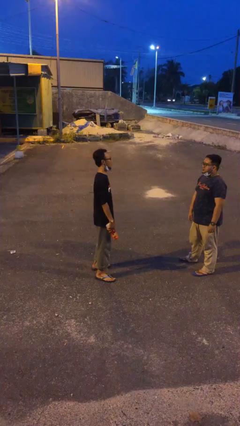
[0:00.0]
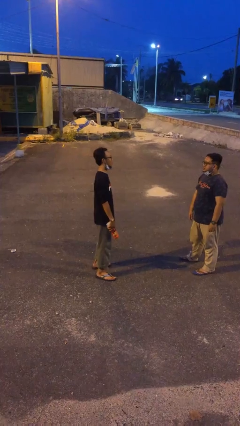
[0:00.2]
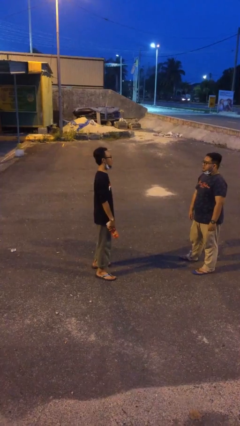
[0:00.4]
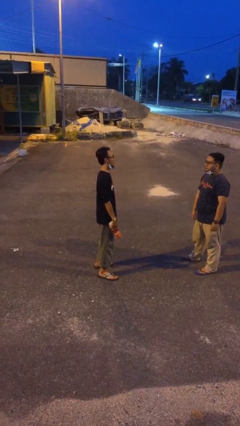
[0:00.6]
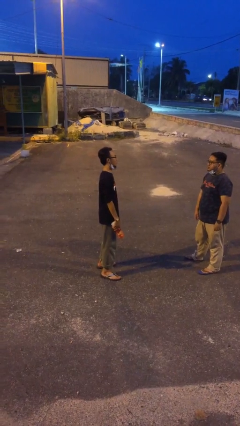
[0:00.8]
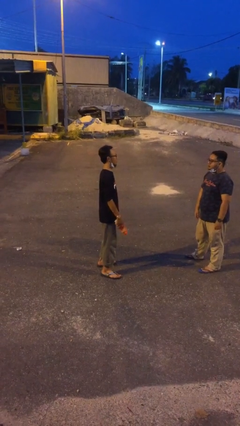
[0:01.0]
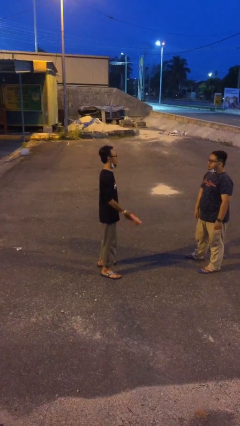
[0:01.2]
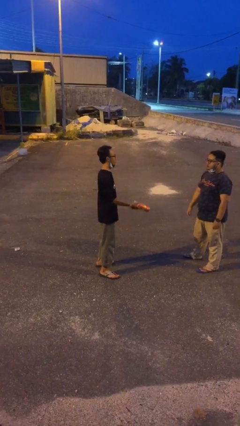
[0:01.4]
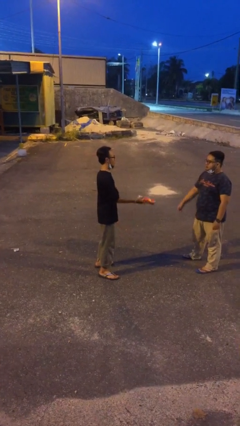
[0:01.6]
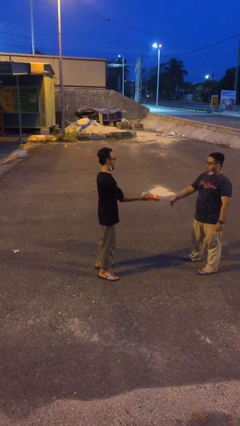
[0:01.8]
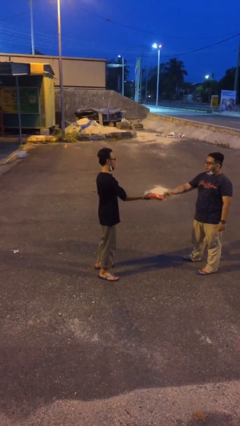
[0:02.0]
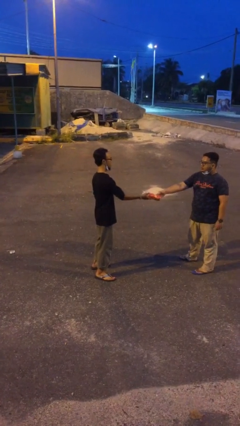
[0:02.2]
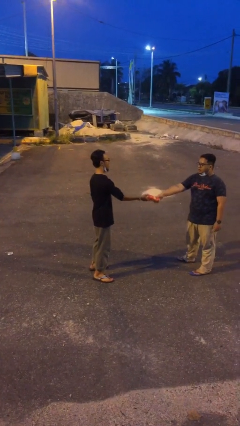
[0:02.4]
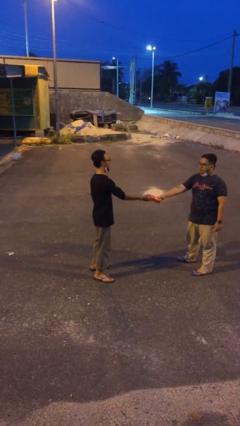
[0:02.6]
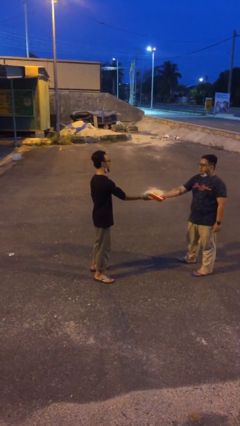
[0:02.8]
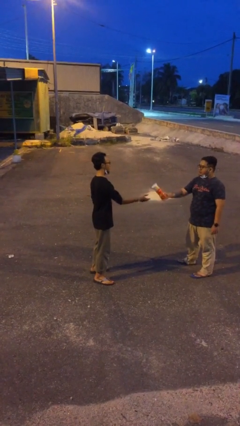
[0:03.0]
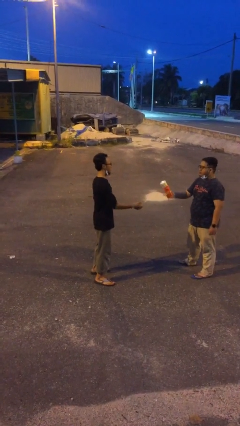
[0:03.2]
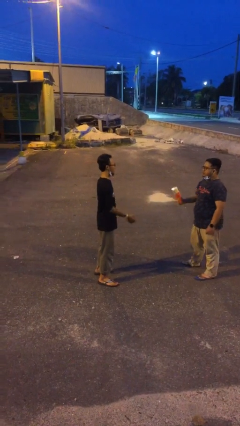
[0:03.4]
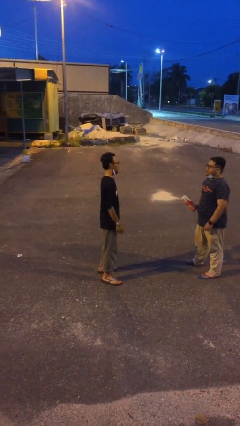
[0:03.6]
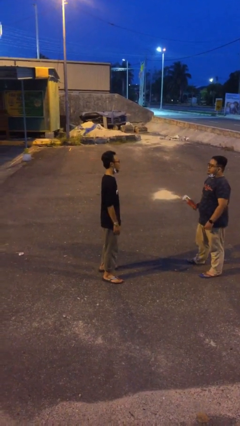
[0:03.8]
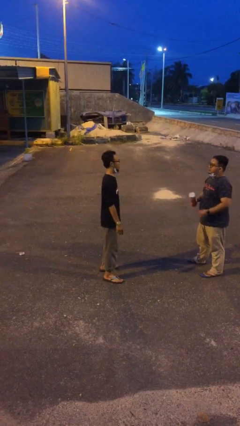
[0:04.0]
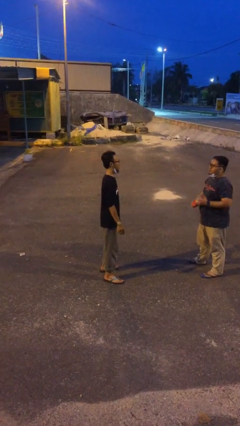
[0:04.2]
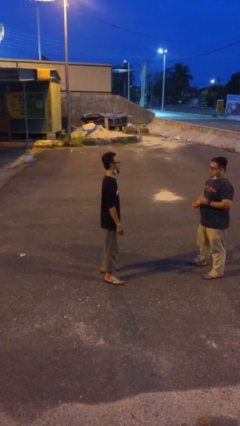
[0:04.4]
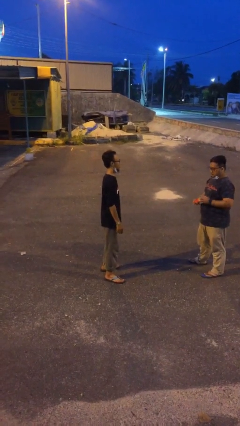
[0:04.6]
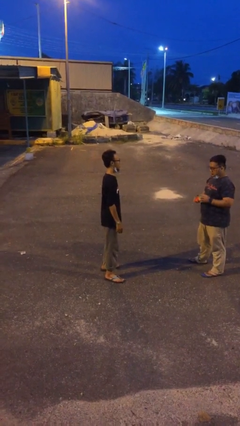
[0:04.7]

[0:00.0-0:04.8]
person transfers object to person

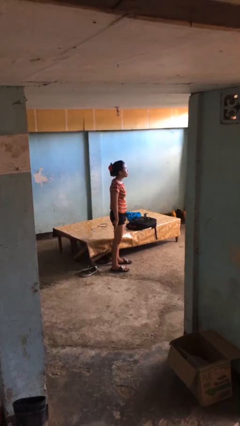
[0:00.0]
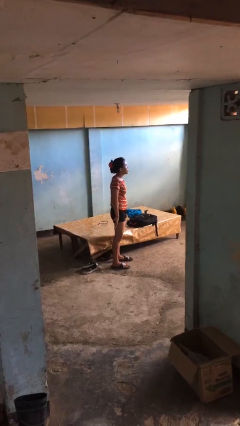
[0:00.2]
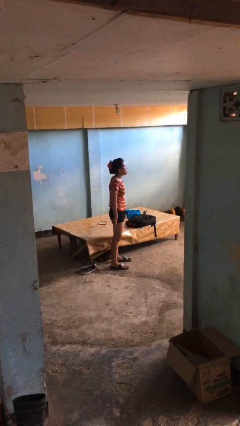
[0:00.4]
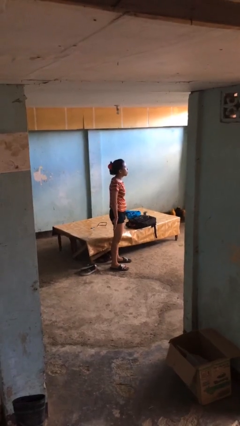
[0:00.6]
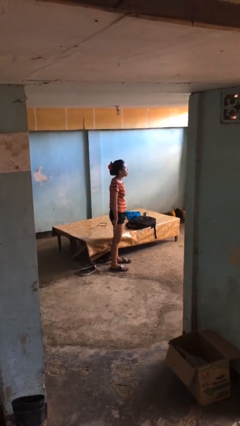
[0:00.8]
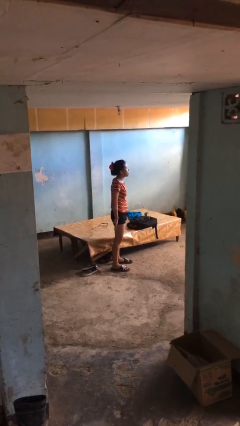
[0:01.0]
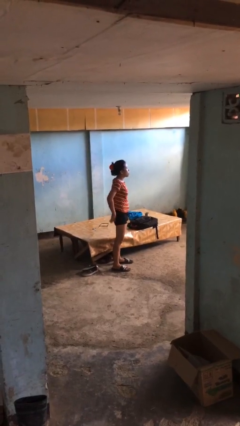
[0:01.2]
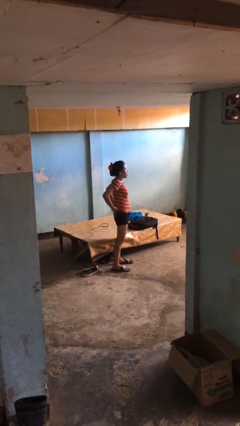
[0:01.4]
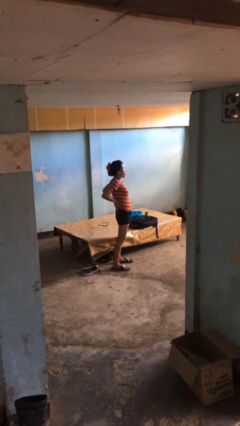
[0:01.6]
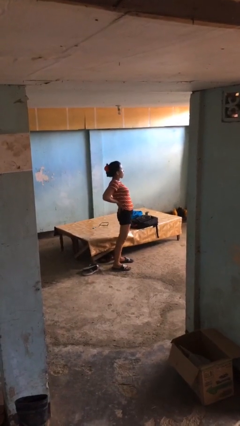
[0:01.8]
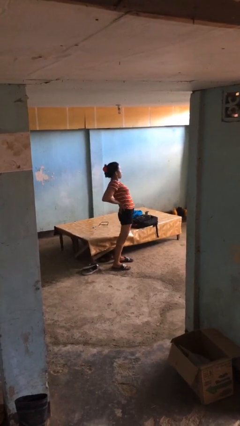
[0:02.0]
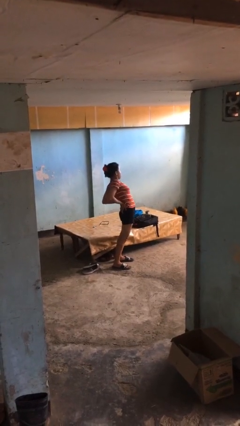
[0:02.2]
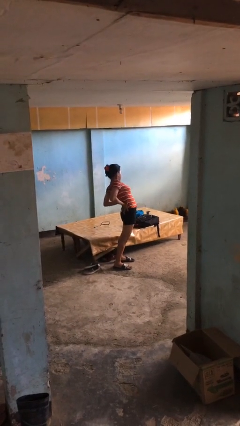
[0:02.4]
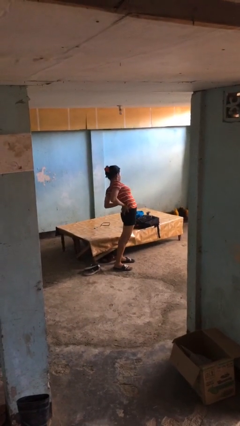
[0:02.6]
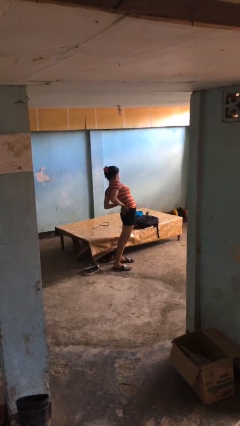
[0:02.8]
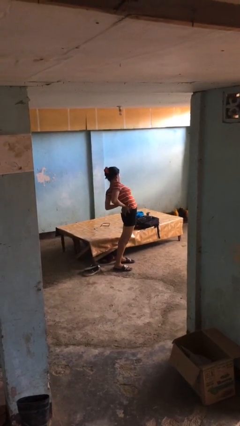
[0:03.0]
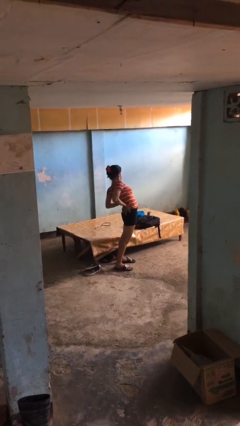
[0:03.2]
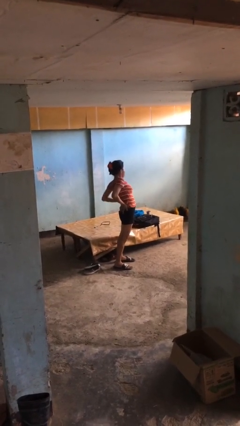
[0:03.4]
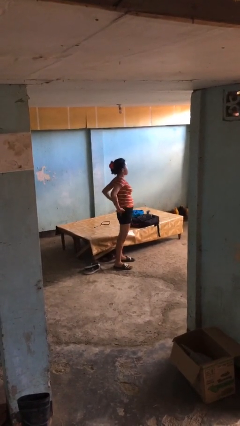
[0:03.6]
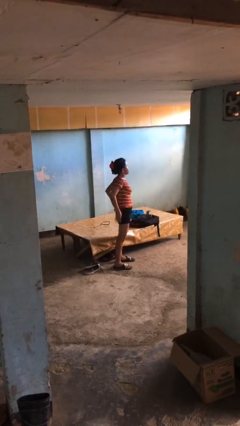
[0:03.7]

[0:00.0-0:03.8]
person stretches back

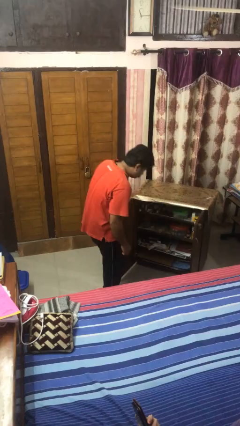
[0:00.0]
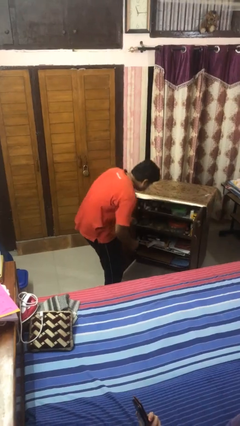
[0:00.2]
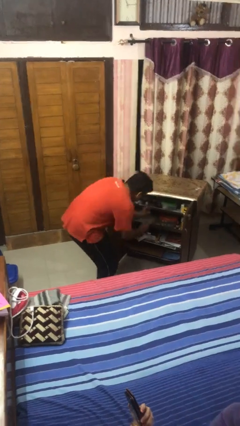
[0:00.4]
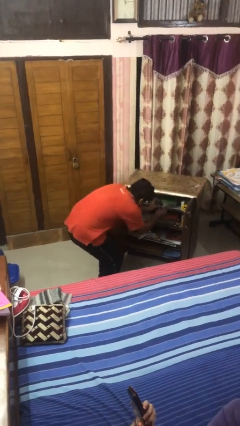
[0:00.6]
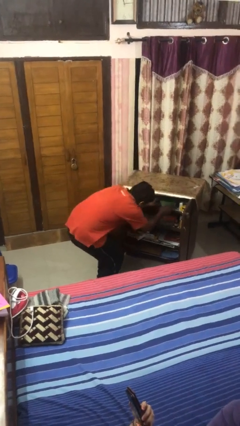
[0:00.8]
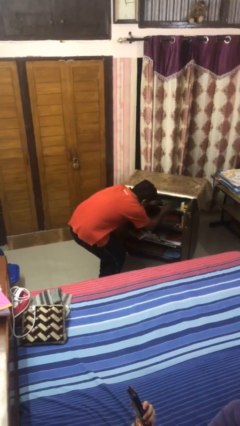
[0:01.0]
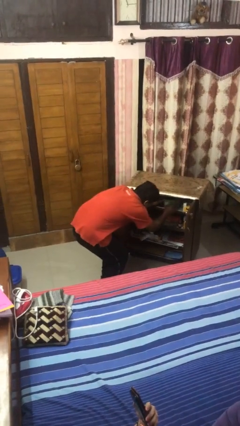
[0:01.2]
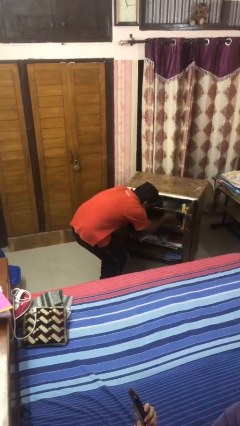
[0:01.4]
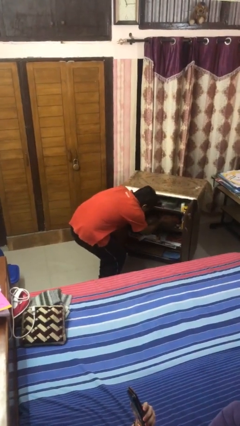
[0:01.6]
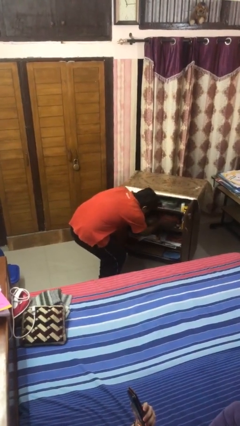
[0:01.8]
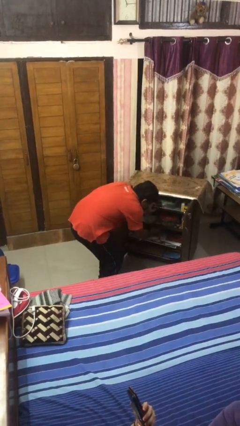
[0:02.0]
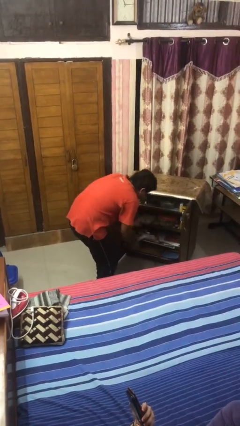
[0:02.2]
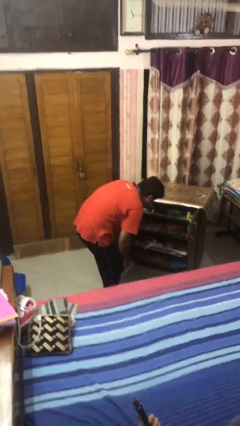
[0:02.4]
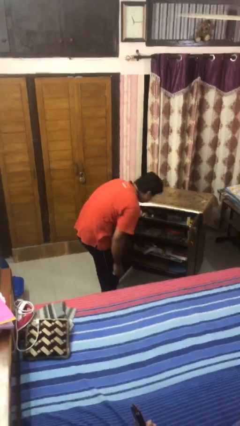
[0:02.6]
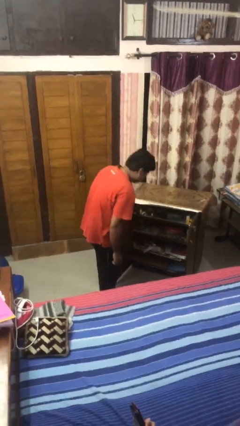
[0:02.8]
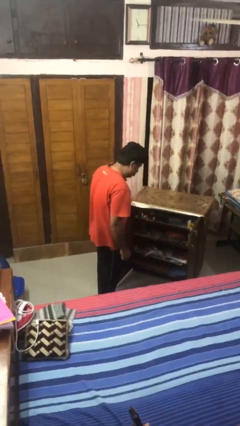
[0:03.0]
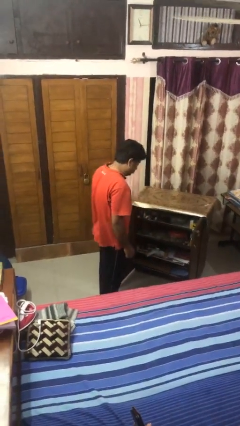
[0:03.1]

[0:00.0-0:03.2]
person searches in cabinet

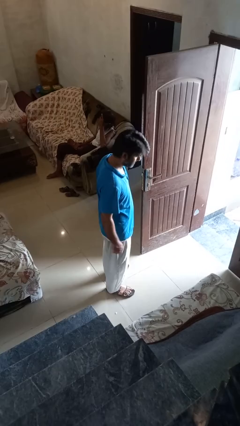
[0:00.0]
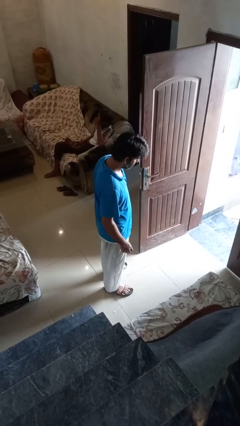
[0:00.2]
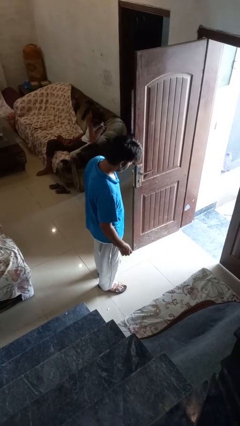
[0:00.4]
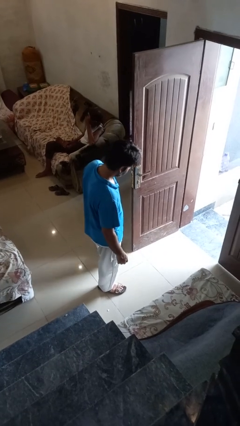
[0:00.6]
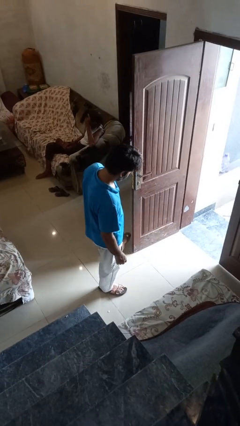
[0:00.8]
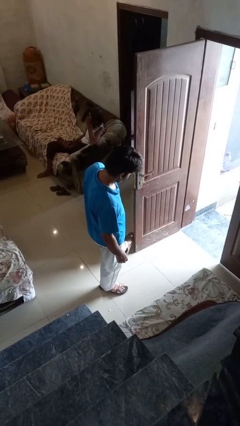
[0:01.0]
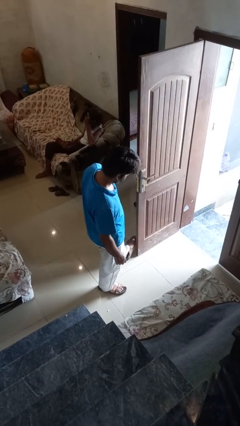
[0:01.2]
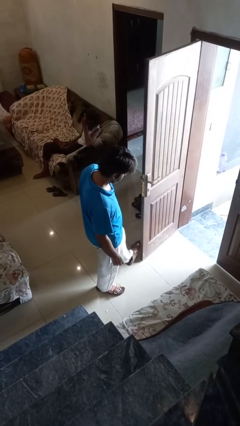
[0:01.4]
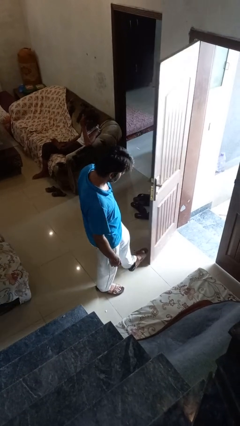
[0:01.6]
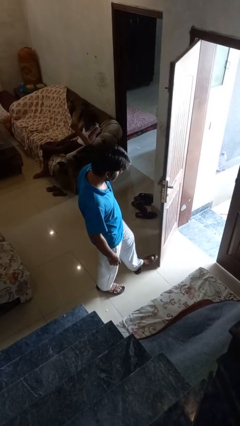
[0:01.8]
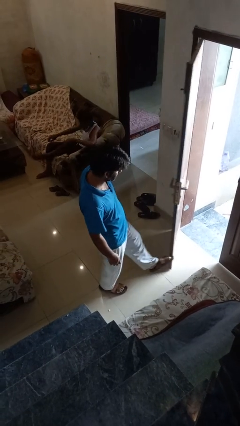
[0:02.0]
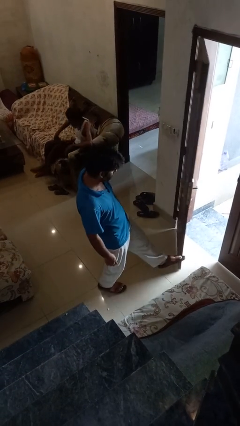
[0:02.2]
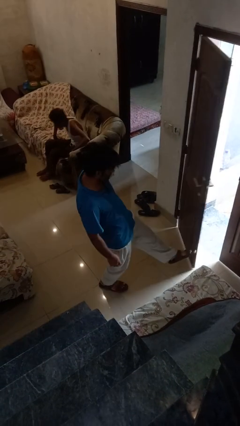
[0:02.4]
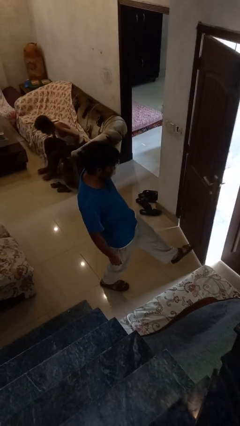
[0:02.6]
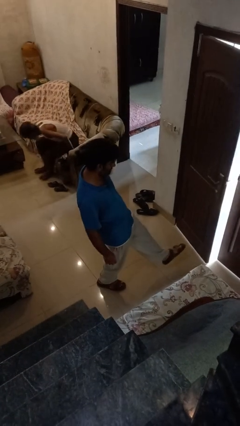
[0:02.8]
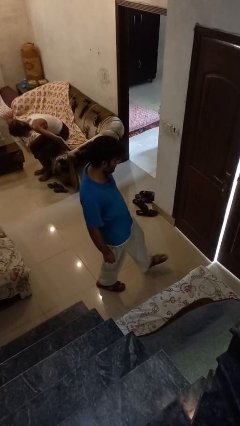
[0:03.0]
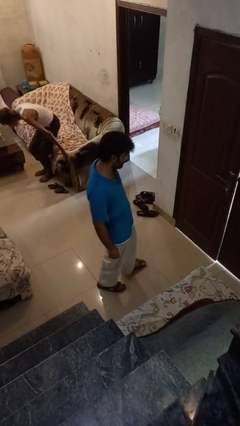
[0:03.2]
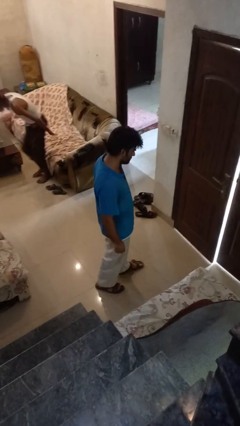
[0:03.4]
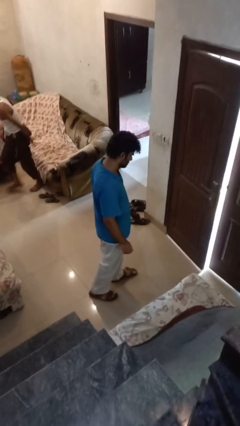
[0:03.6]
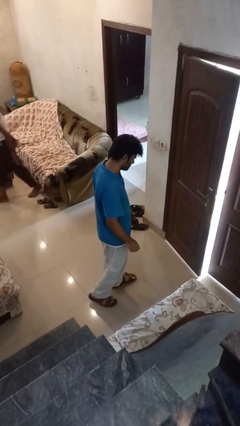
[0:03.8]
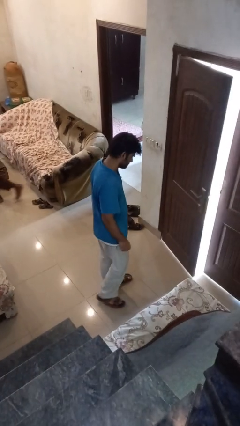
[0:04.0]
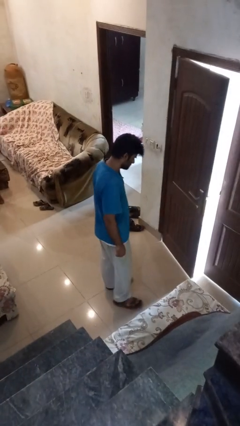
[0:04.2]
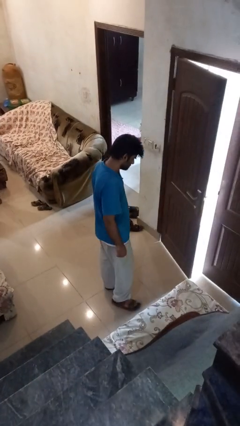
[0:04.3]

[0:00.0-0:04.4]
person closes door with foot

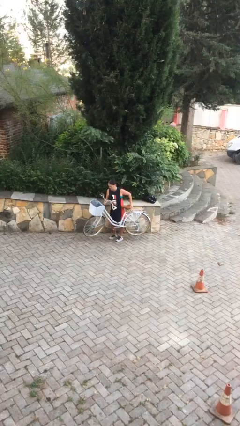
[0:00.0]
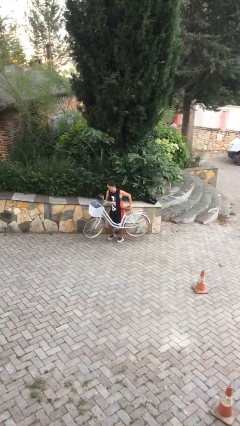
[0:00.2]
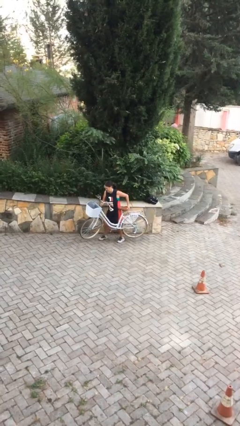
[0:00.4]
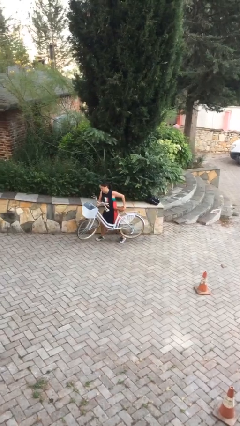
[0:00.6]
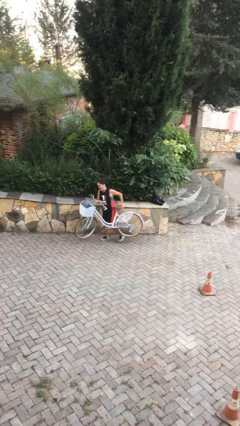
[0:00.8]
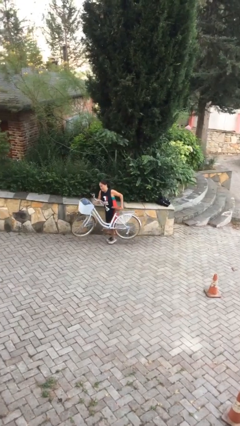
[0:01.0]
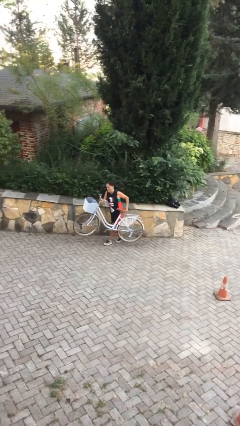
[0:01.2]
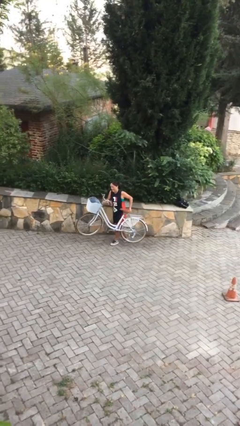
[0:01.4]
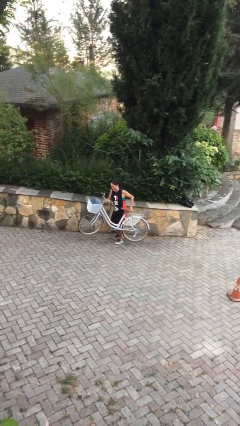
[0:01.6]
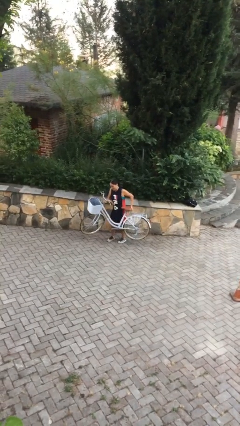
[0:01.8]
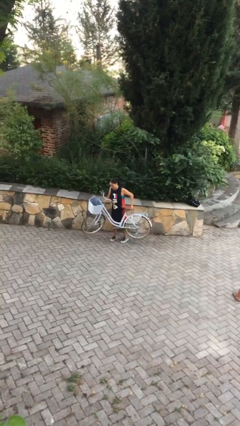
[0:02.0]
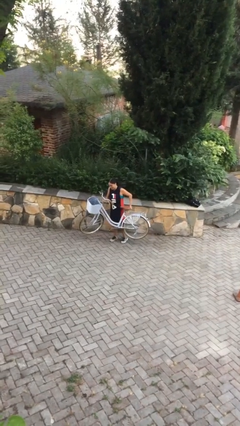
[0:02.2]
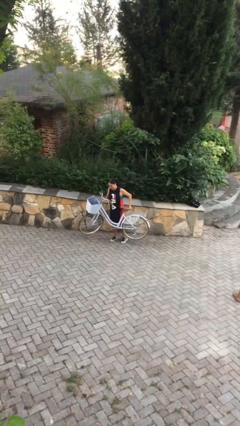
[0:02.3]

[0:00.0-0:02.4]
person carries bicycle
